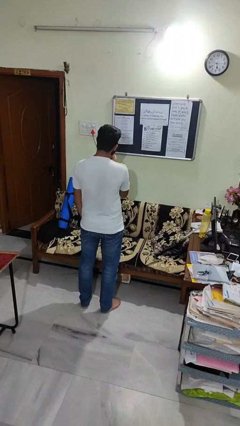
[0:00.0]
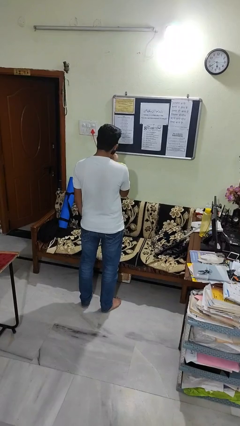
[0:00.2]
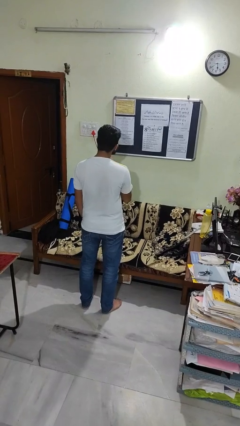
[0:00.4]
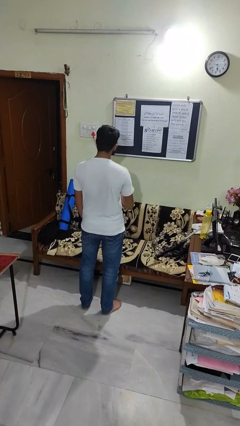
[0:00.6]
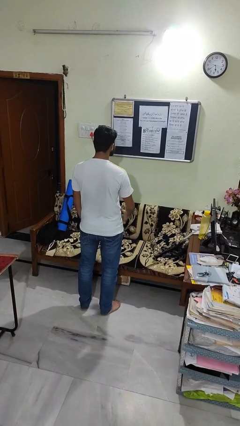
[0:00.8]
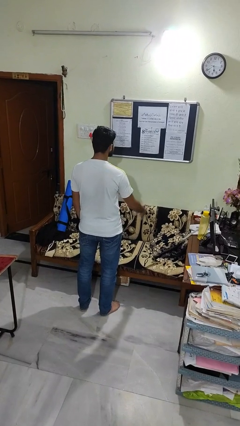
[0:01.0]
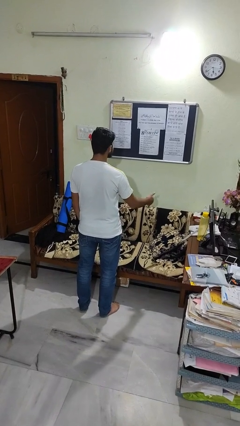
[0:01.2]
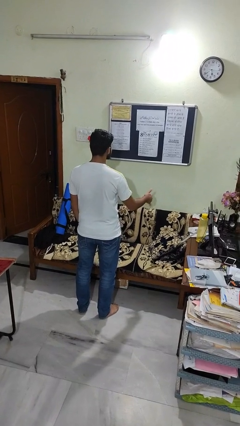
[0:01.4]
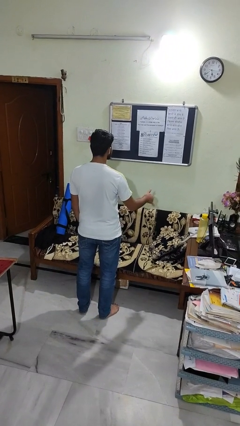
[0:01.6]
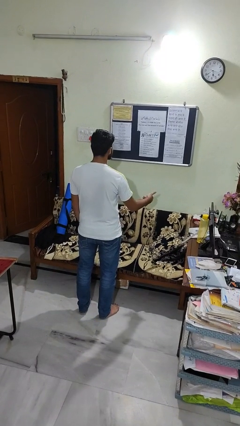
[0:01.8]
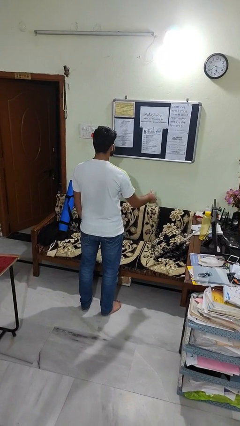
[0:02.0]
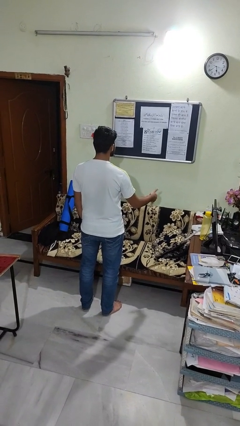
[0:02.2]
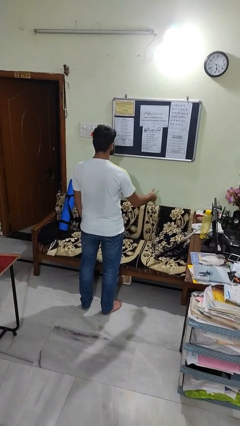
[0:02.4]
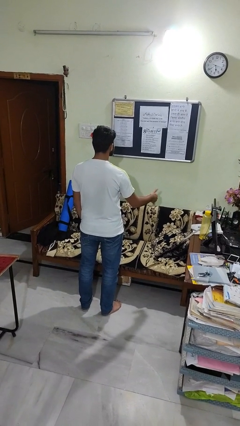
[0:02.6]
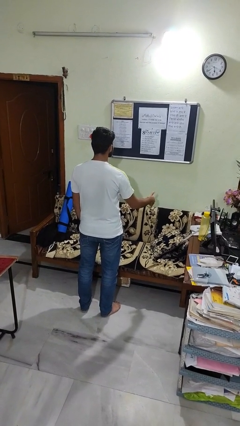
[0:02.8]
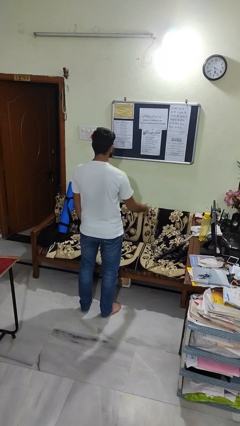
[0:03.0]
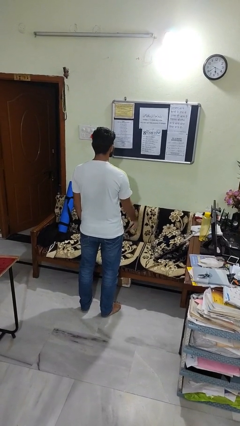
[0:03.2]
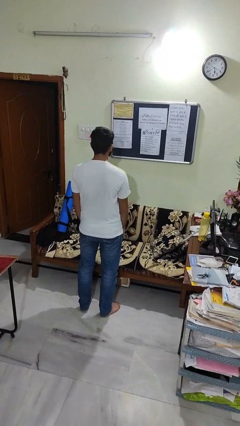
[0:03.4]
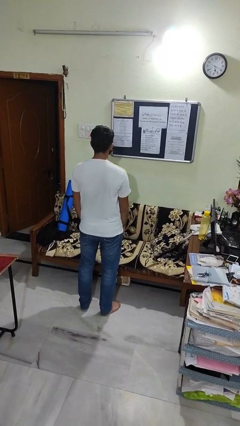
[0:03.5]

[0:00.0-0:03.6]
person gestures hang loose

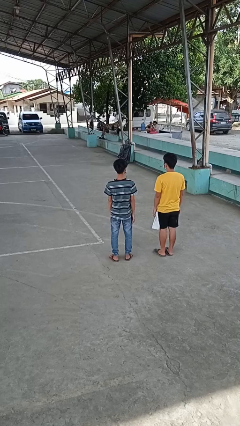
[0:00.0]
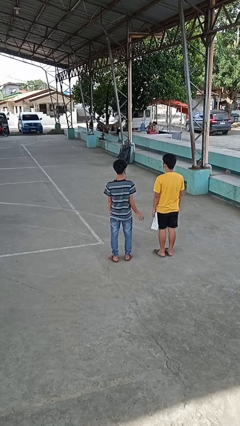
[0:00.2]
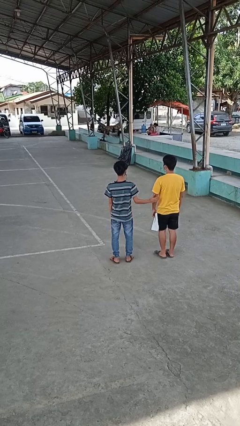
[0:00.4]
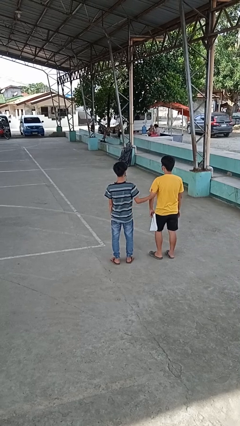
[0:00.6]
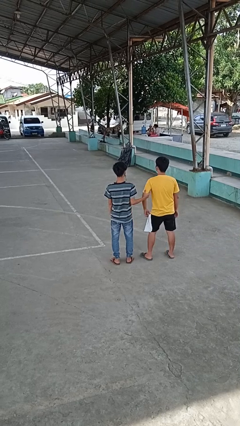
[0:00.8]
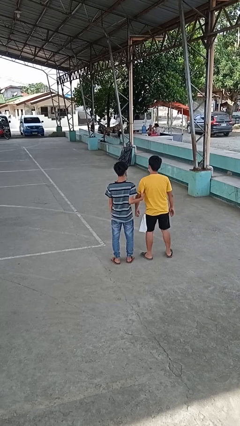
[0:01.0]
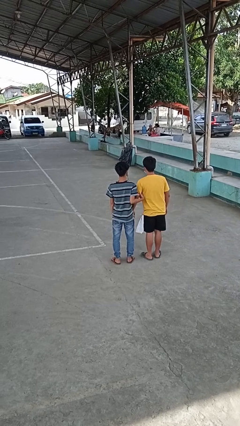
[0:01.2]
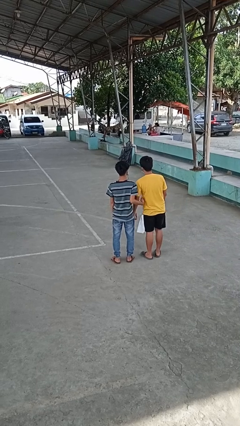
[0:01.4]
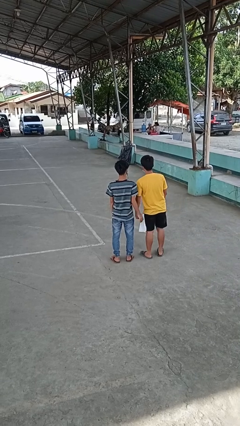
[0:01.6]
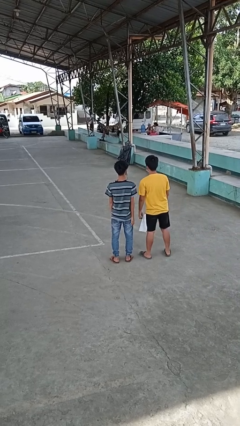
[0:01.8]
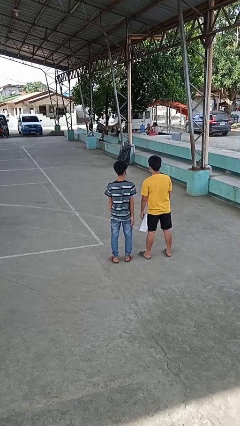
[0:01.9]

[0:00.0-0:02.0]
person grabs person by bicep

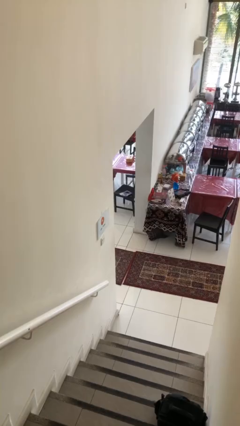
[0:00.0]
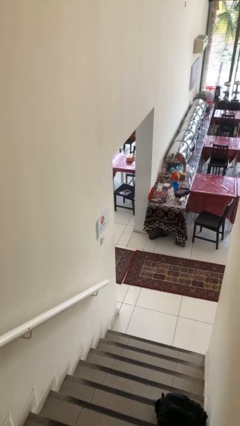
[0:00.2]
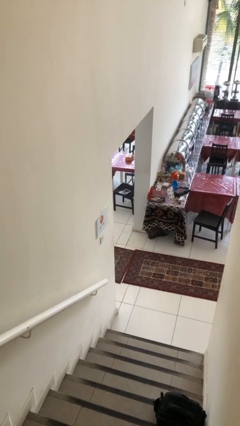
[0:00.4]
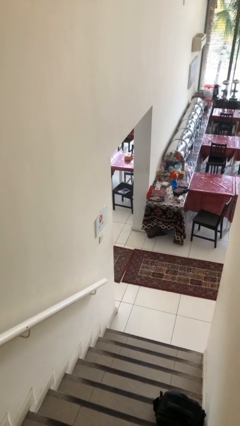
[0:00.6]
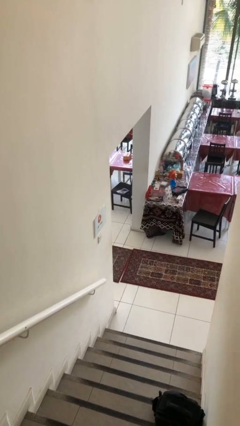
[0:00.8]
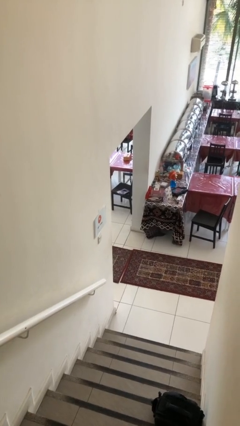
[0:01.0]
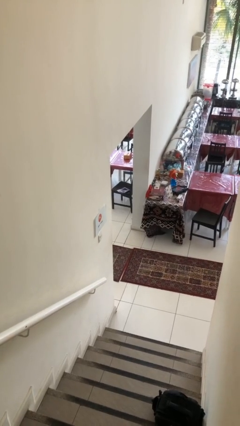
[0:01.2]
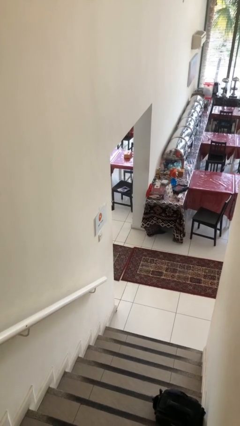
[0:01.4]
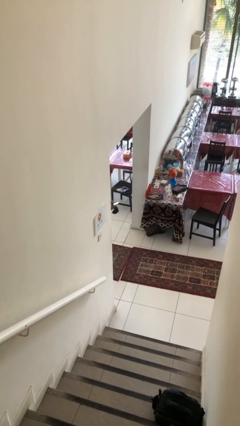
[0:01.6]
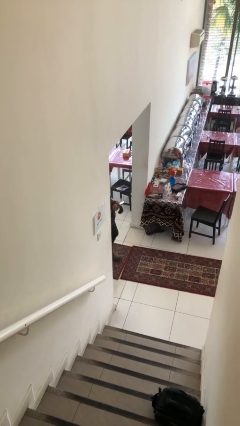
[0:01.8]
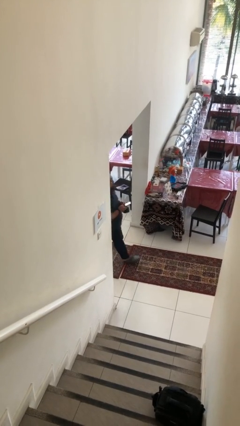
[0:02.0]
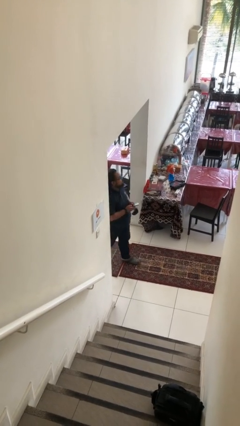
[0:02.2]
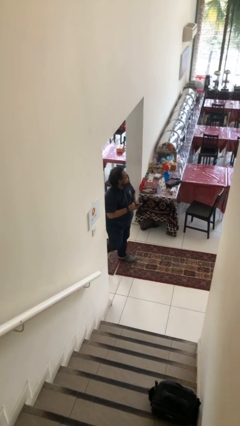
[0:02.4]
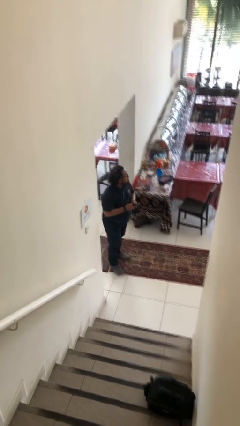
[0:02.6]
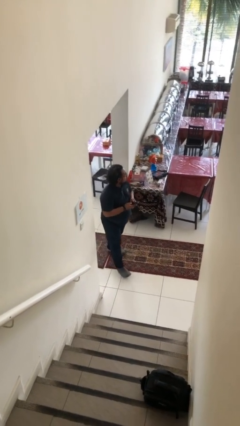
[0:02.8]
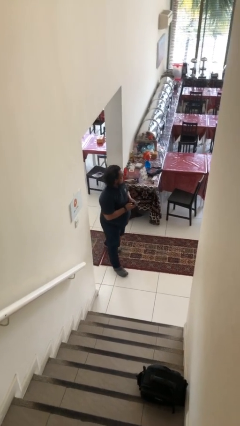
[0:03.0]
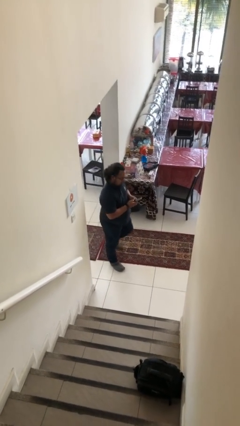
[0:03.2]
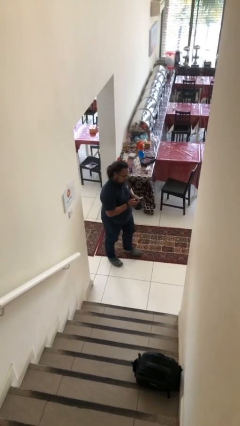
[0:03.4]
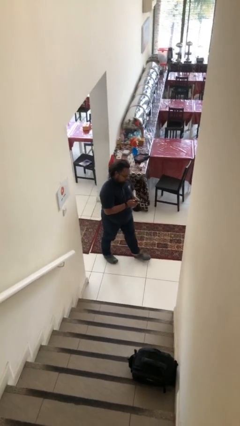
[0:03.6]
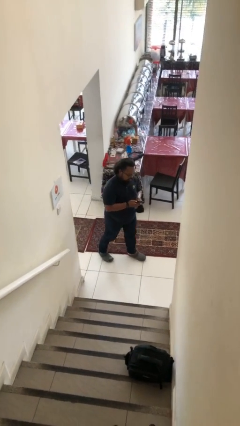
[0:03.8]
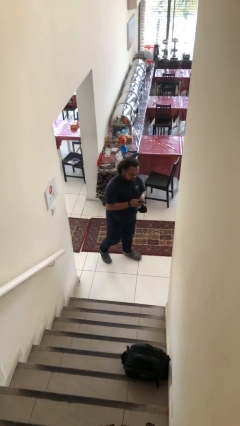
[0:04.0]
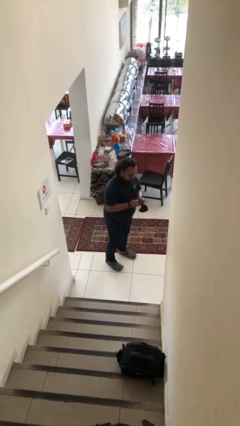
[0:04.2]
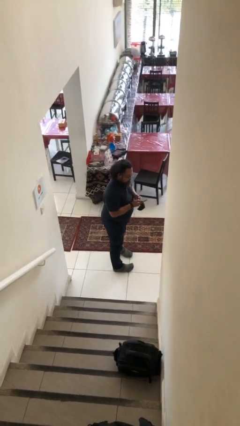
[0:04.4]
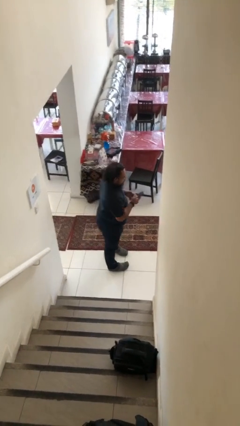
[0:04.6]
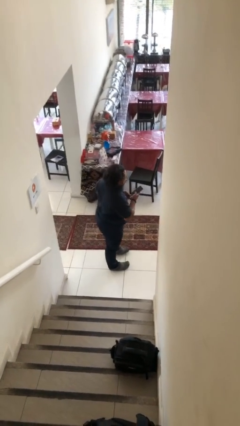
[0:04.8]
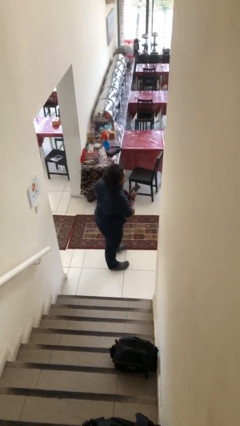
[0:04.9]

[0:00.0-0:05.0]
person enters scene through structure

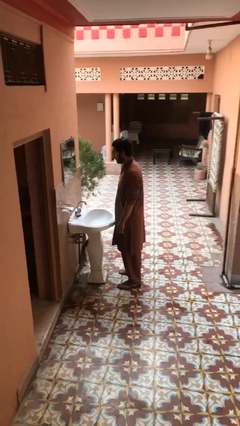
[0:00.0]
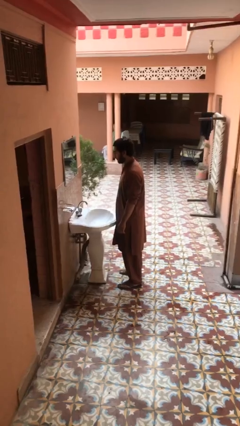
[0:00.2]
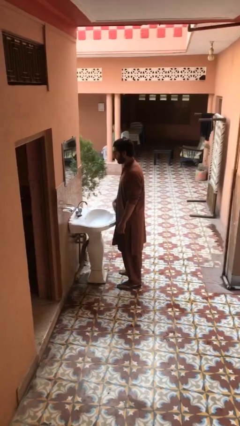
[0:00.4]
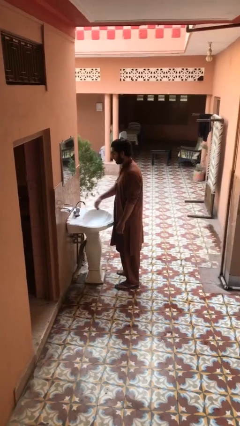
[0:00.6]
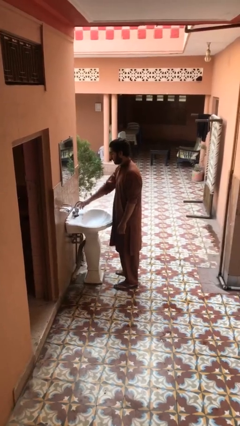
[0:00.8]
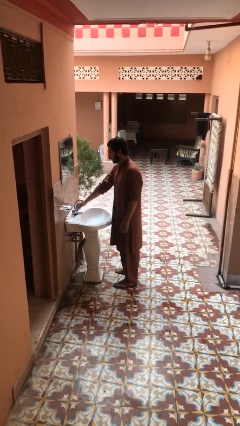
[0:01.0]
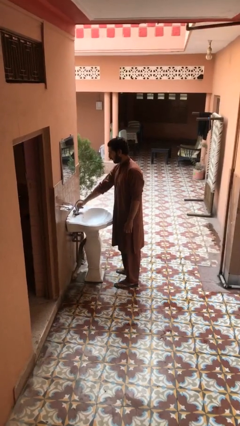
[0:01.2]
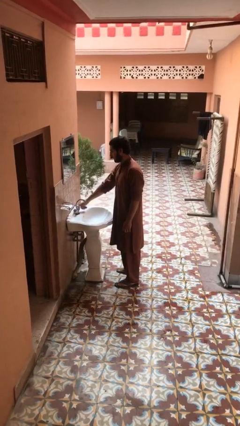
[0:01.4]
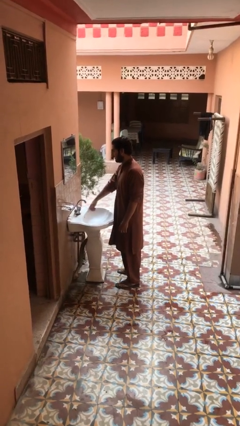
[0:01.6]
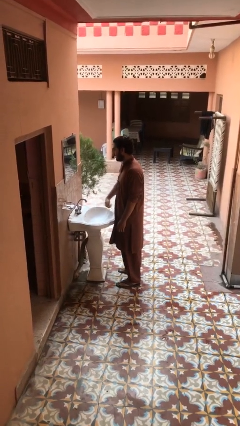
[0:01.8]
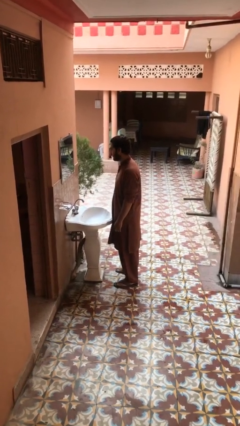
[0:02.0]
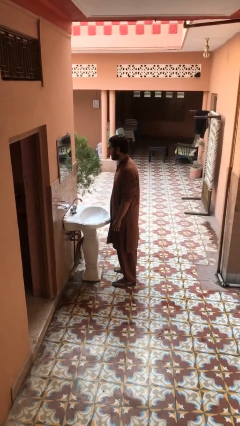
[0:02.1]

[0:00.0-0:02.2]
person turns off faucet

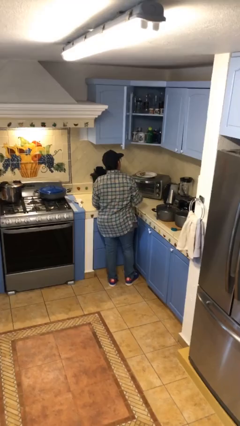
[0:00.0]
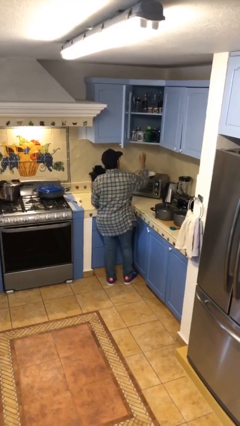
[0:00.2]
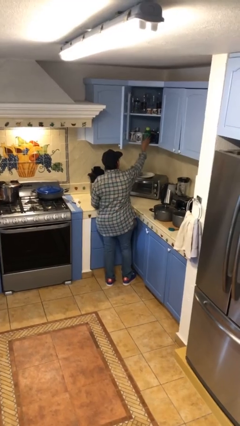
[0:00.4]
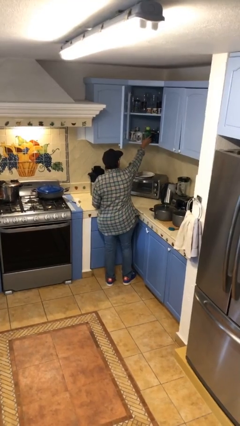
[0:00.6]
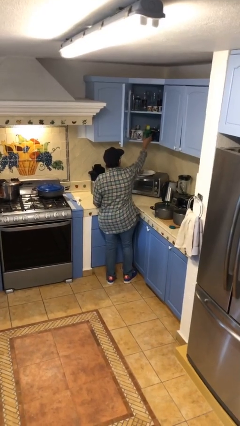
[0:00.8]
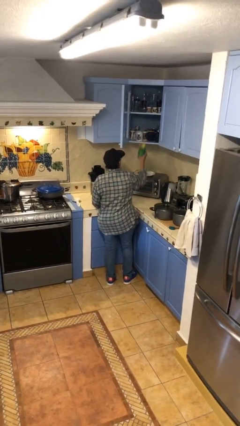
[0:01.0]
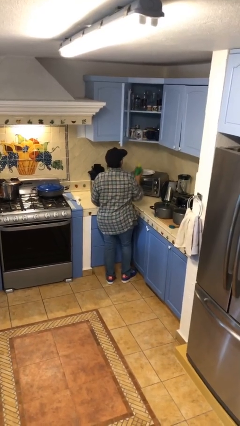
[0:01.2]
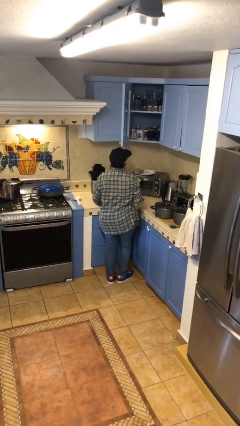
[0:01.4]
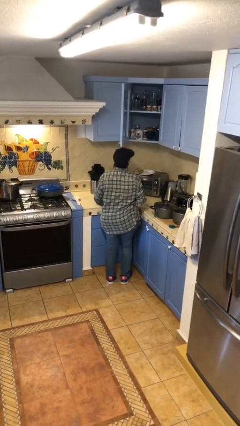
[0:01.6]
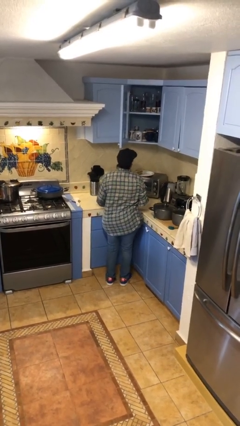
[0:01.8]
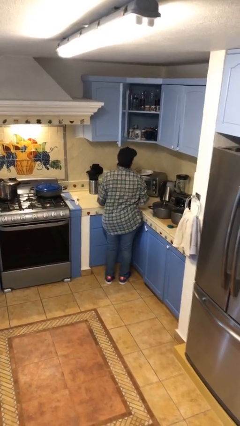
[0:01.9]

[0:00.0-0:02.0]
person picks up object from cabinet

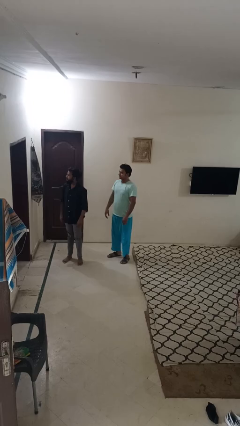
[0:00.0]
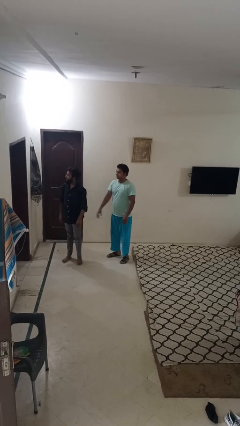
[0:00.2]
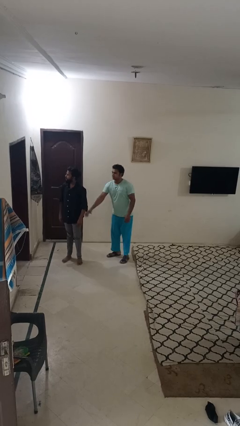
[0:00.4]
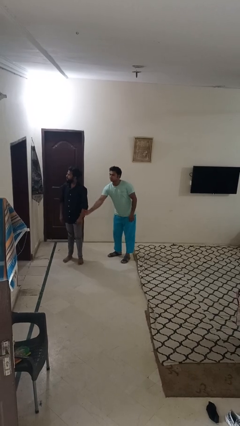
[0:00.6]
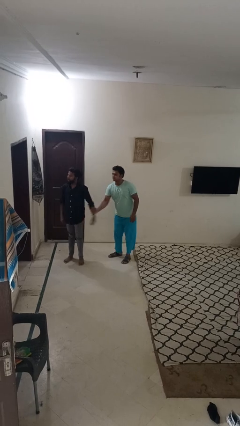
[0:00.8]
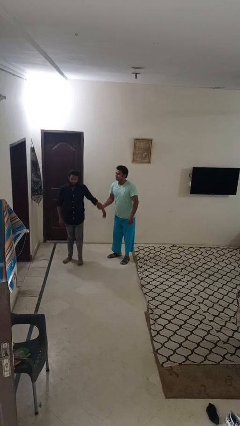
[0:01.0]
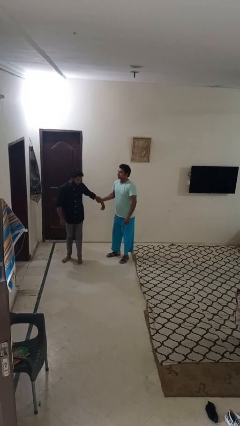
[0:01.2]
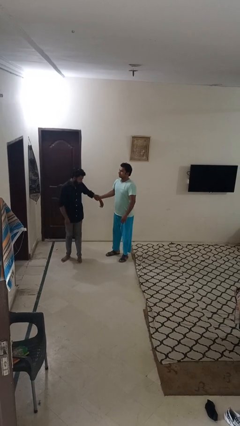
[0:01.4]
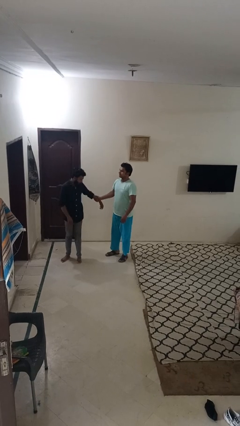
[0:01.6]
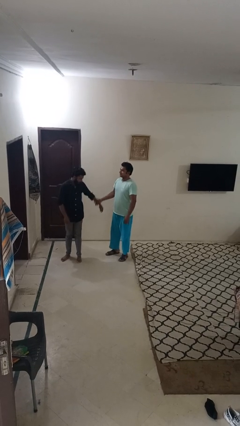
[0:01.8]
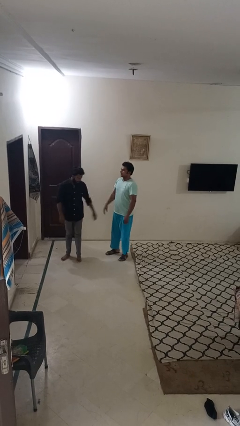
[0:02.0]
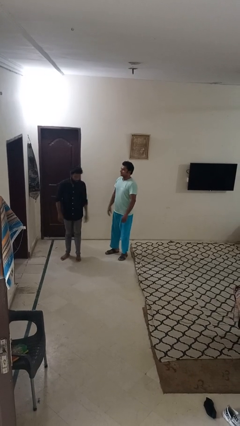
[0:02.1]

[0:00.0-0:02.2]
person grabs person by forearm
